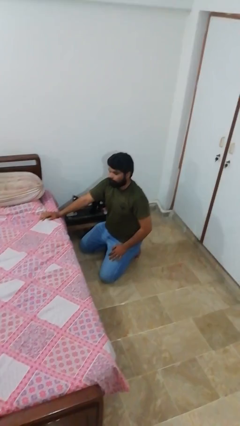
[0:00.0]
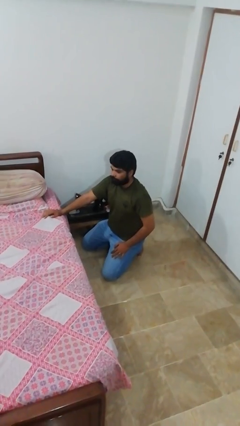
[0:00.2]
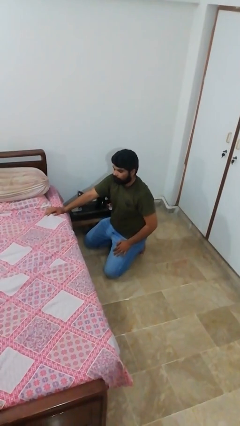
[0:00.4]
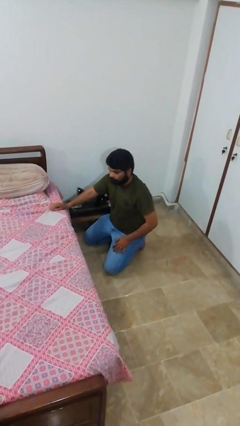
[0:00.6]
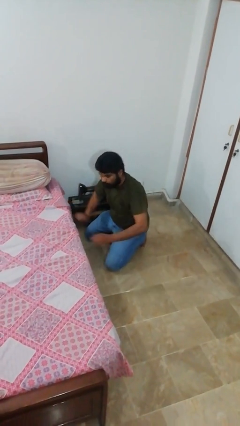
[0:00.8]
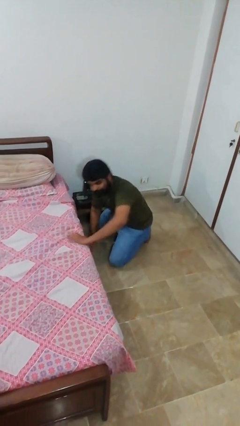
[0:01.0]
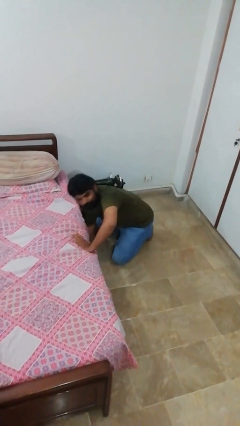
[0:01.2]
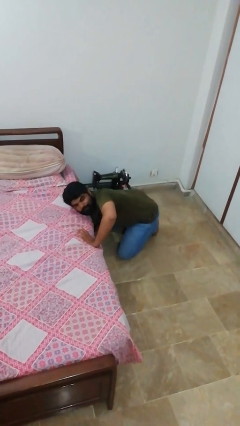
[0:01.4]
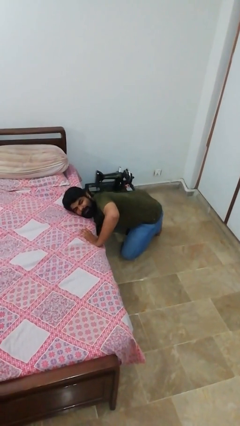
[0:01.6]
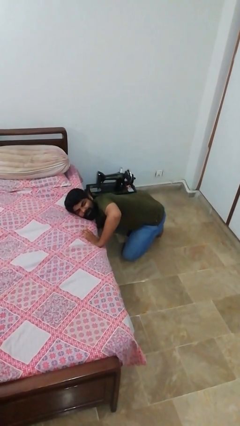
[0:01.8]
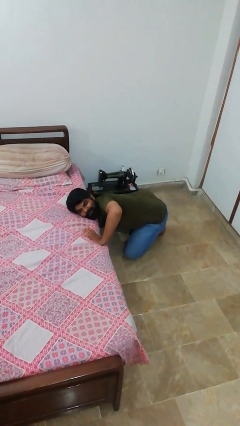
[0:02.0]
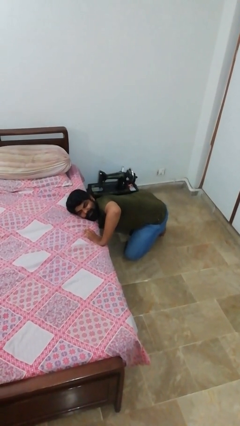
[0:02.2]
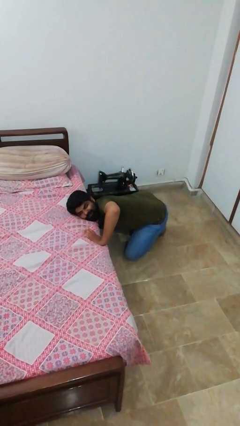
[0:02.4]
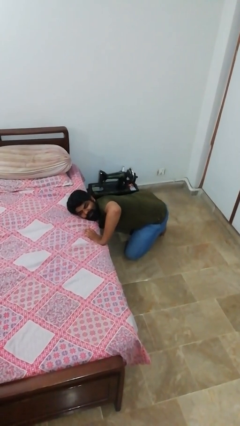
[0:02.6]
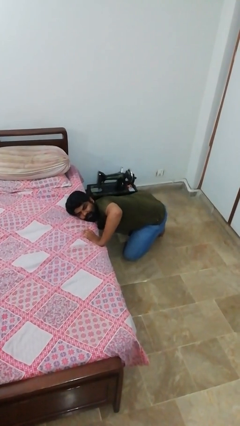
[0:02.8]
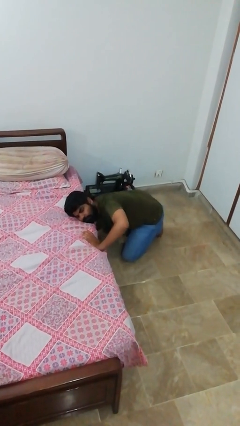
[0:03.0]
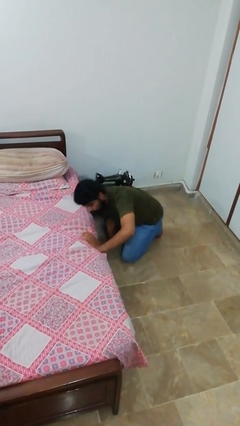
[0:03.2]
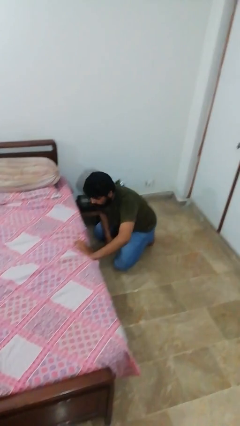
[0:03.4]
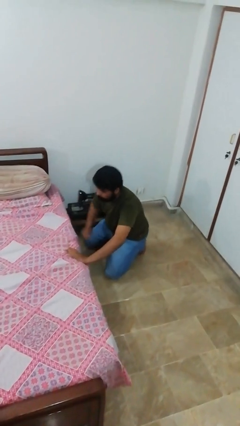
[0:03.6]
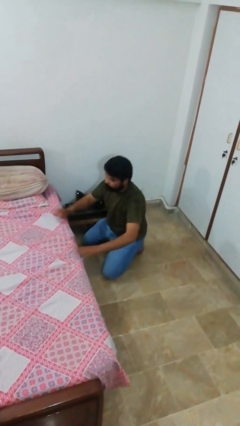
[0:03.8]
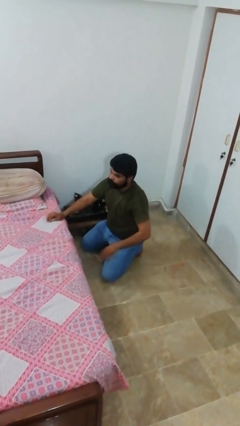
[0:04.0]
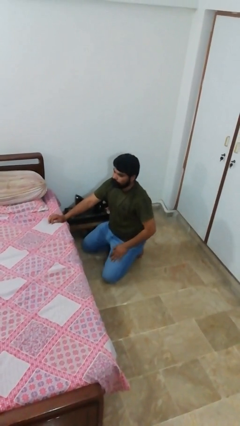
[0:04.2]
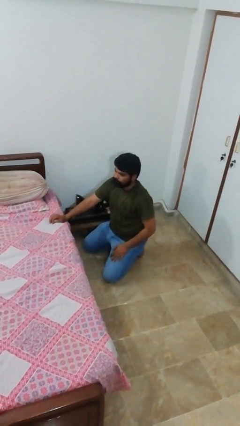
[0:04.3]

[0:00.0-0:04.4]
person searches under bed

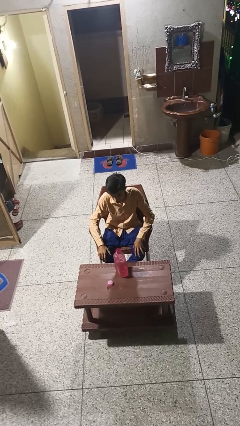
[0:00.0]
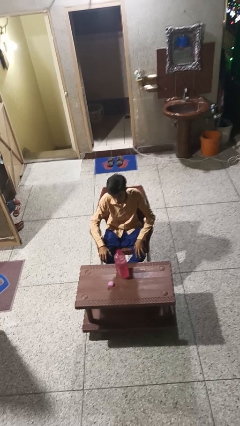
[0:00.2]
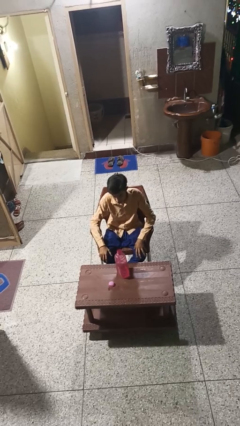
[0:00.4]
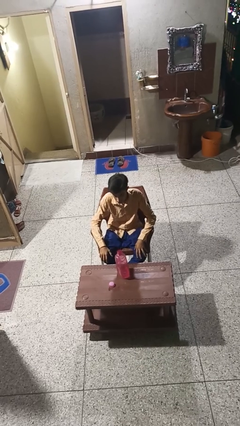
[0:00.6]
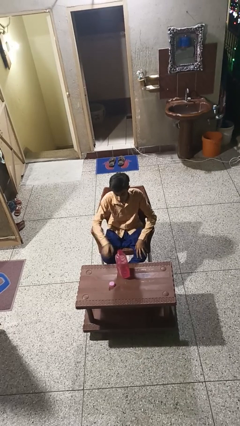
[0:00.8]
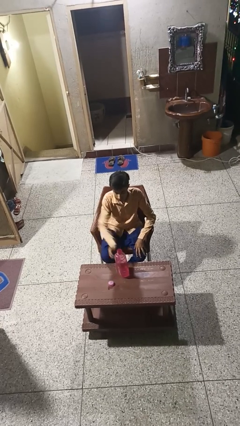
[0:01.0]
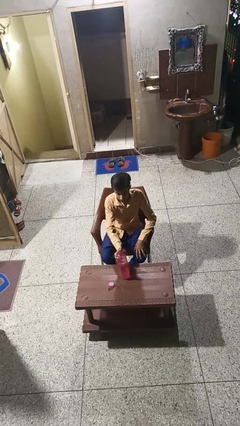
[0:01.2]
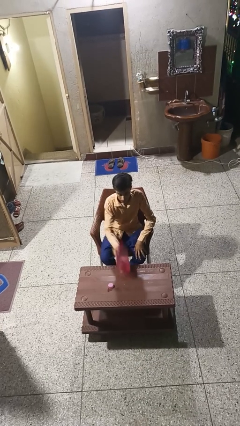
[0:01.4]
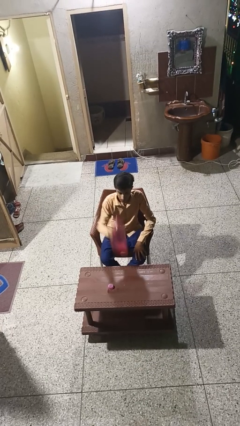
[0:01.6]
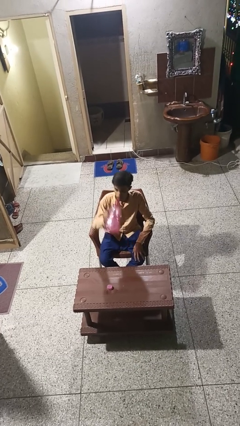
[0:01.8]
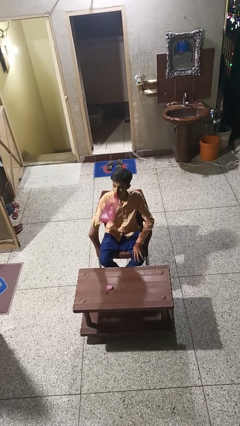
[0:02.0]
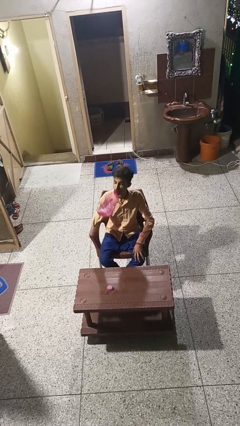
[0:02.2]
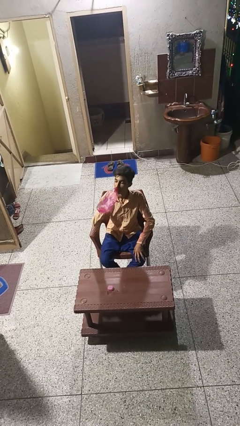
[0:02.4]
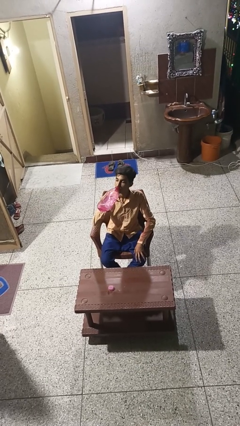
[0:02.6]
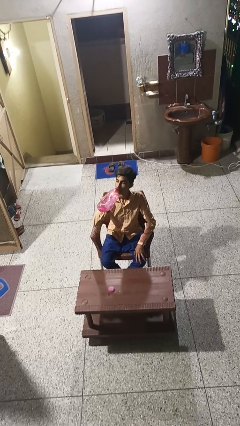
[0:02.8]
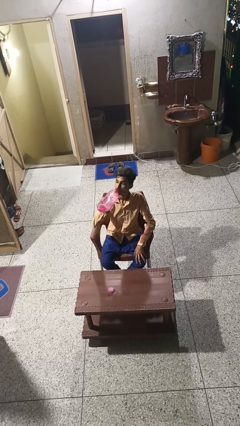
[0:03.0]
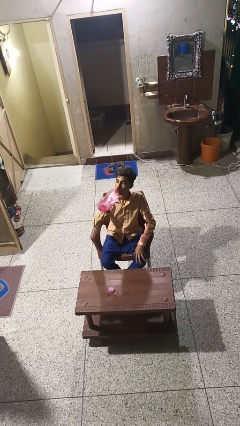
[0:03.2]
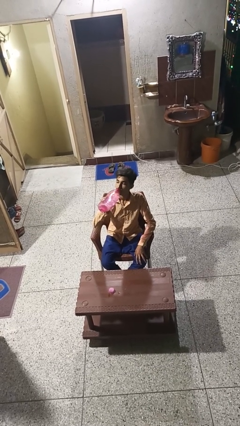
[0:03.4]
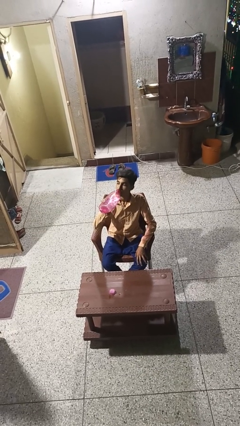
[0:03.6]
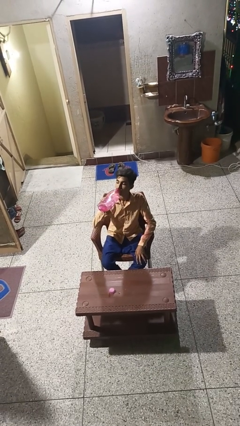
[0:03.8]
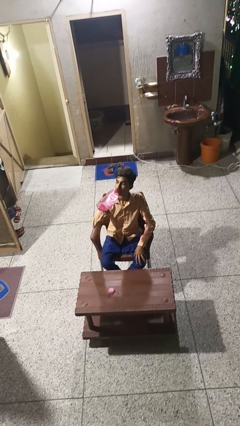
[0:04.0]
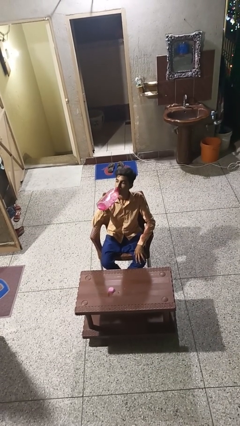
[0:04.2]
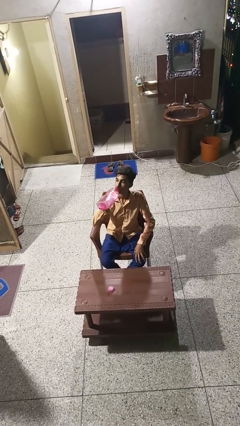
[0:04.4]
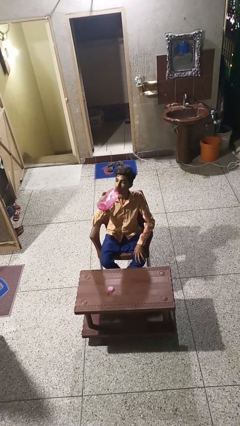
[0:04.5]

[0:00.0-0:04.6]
person drinks from bottle

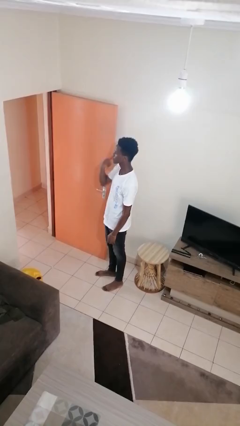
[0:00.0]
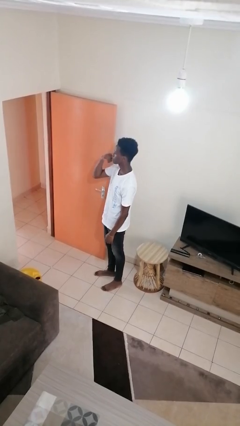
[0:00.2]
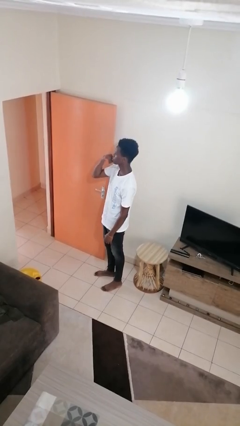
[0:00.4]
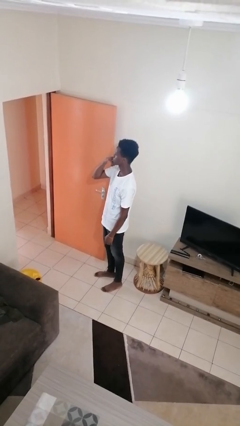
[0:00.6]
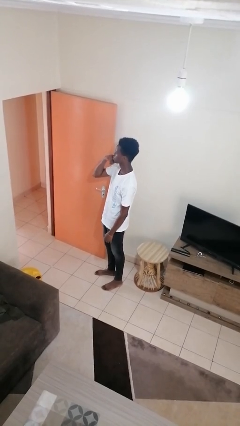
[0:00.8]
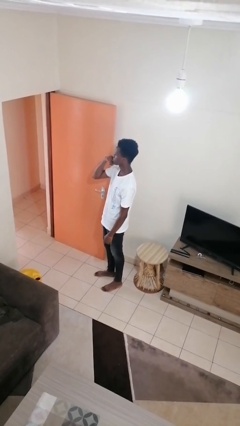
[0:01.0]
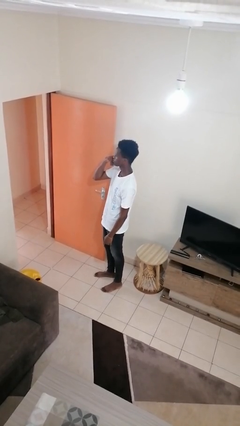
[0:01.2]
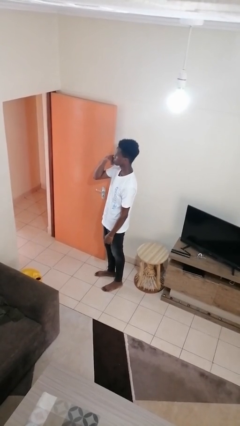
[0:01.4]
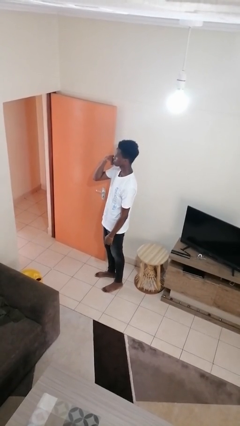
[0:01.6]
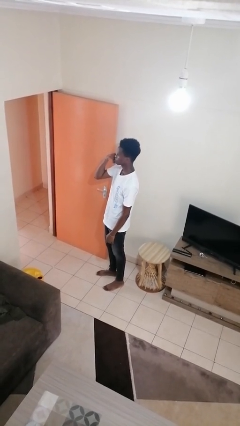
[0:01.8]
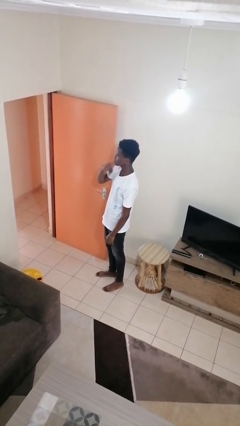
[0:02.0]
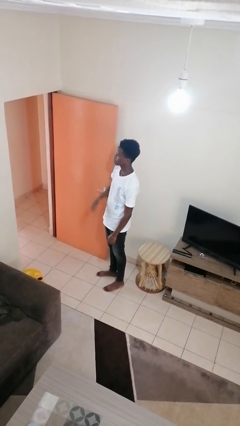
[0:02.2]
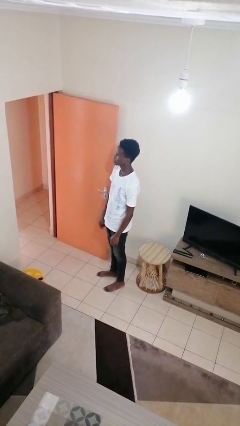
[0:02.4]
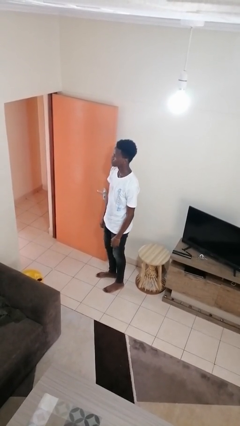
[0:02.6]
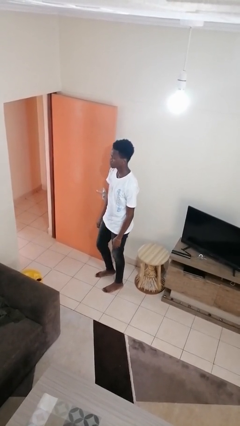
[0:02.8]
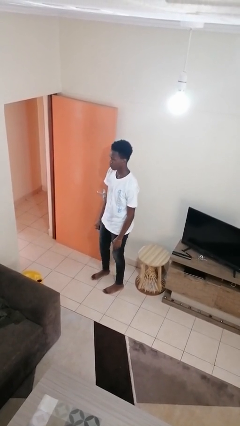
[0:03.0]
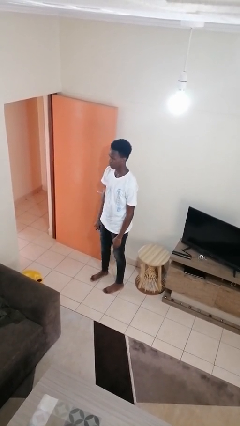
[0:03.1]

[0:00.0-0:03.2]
person gestures call me

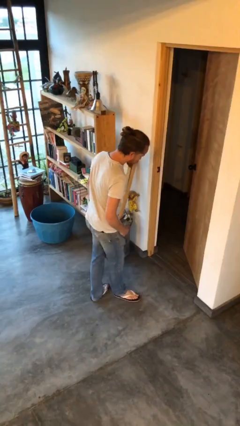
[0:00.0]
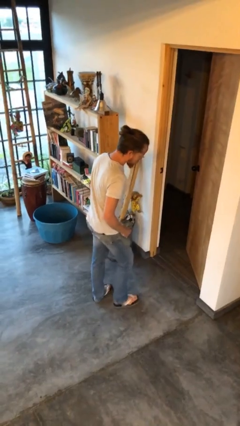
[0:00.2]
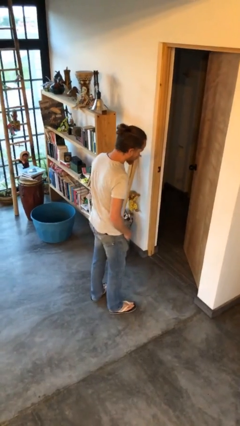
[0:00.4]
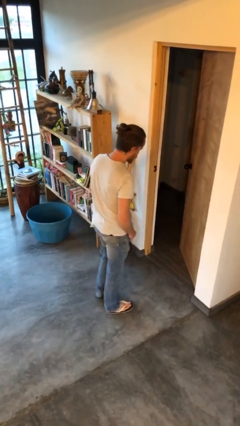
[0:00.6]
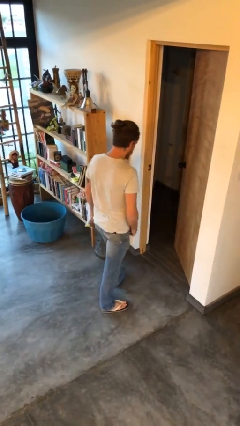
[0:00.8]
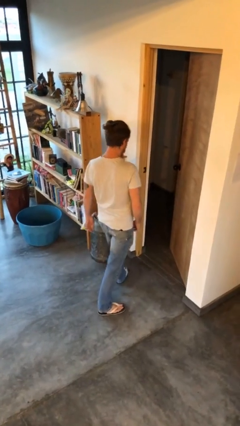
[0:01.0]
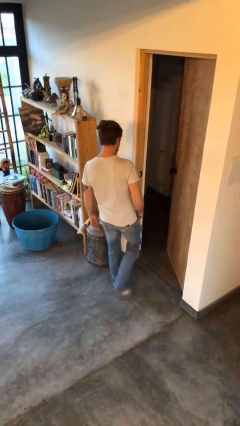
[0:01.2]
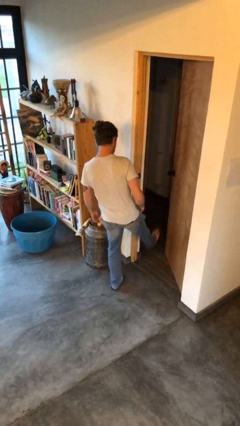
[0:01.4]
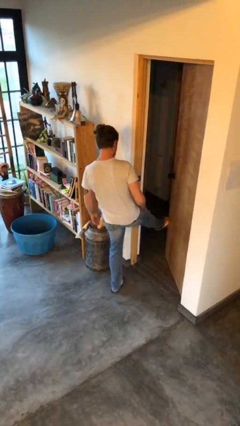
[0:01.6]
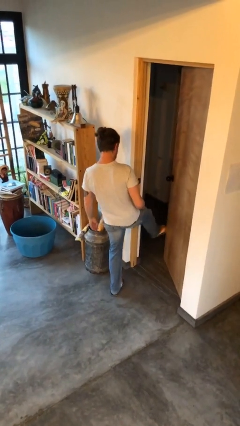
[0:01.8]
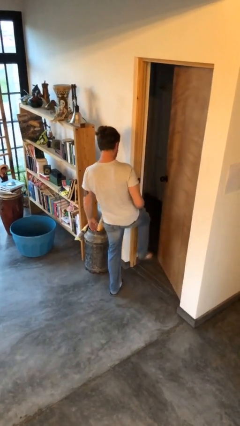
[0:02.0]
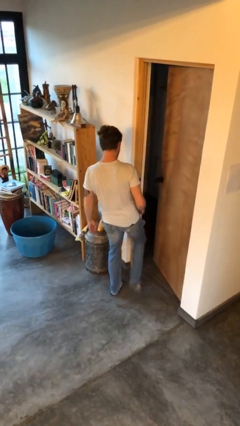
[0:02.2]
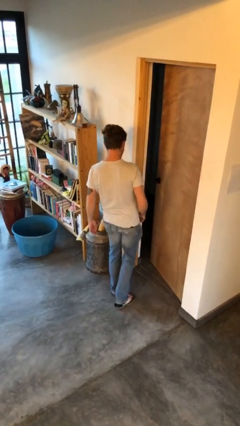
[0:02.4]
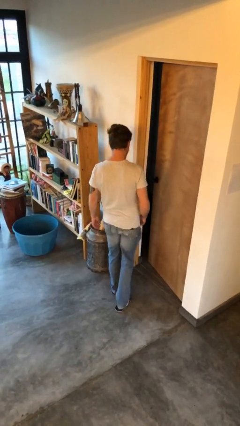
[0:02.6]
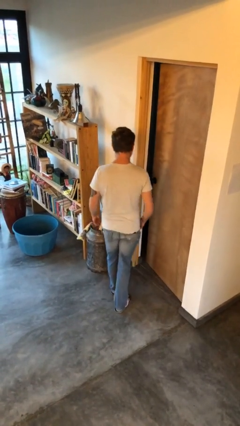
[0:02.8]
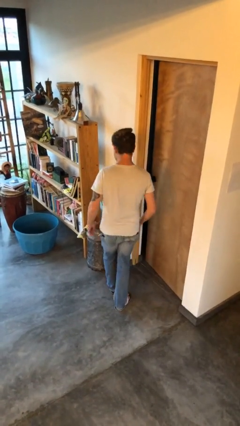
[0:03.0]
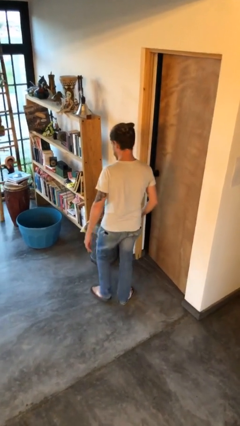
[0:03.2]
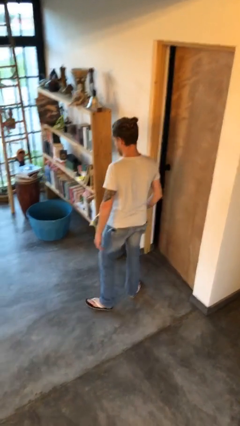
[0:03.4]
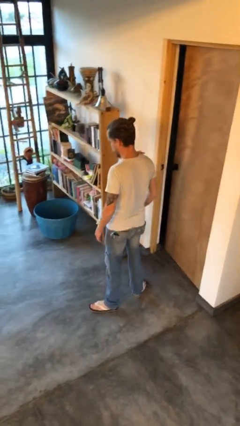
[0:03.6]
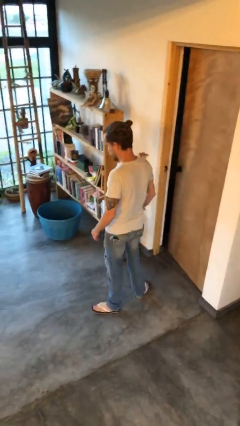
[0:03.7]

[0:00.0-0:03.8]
person closes door with foot

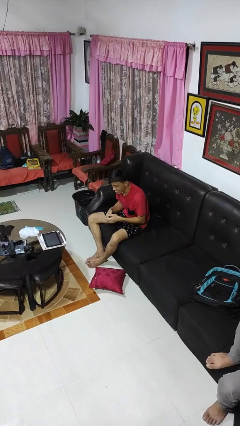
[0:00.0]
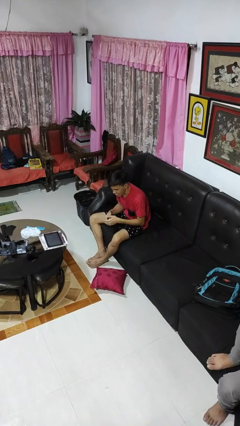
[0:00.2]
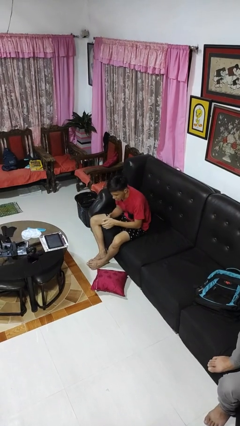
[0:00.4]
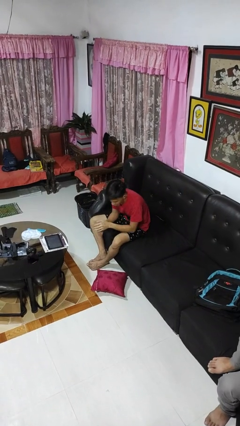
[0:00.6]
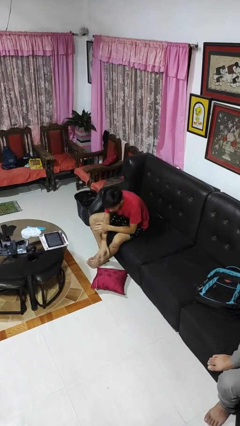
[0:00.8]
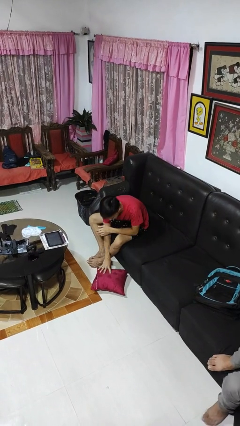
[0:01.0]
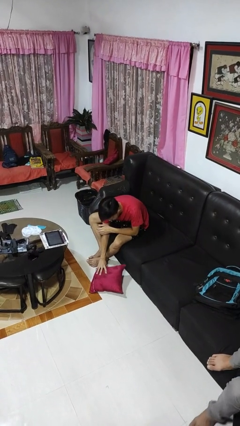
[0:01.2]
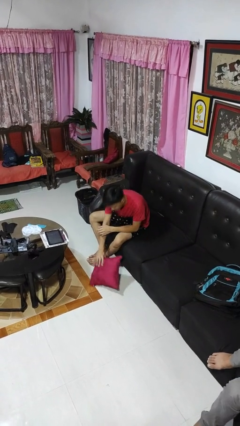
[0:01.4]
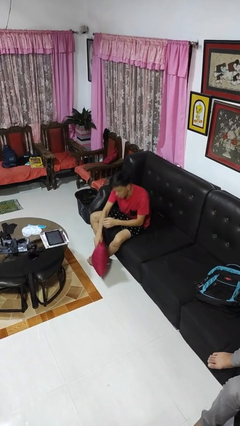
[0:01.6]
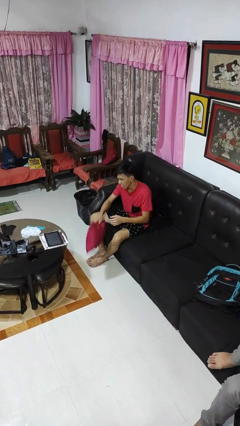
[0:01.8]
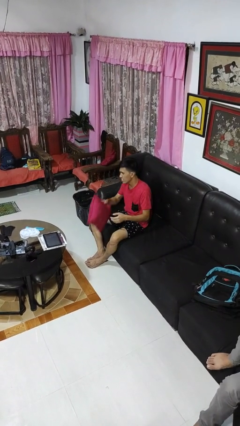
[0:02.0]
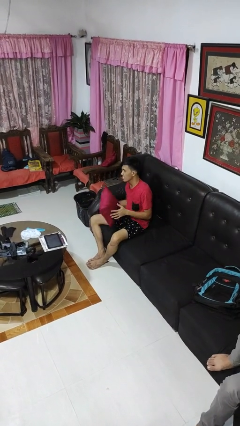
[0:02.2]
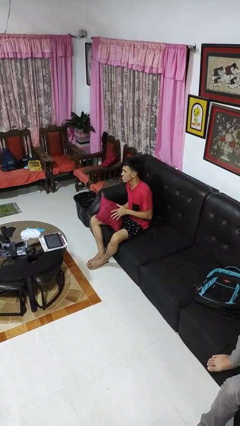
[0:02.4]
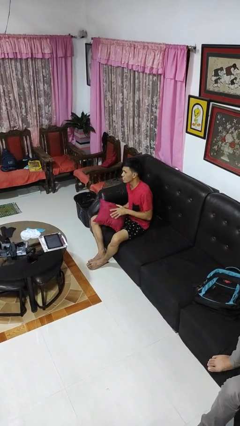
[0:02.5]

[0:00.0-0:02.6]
person picks up object from floor
